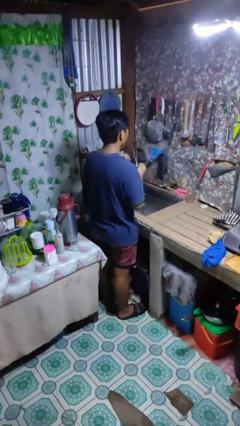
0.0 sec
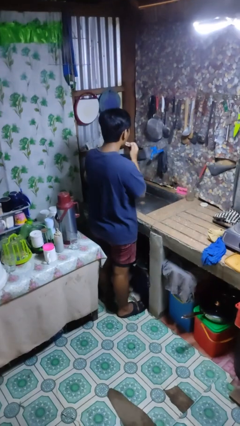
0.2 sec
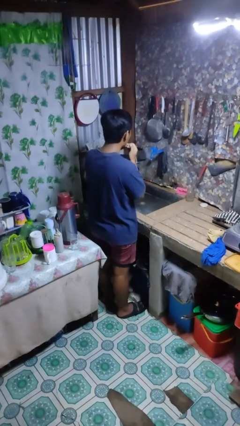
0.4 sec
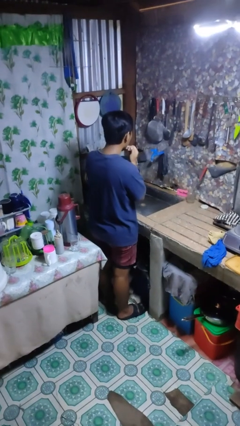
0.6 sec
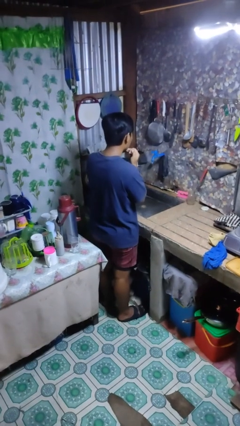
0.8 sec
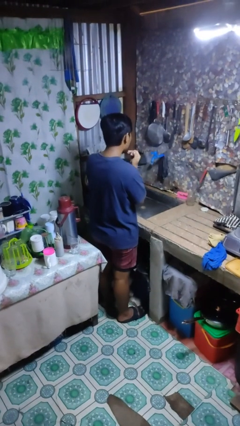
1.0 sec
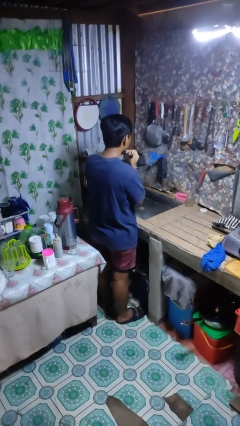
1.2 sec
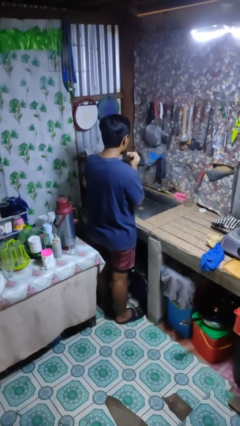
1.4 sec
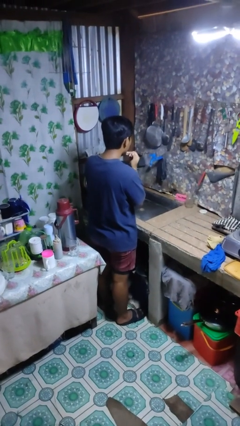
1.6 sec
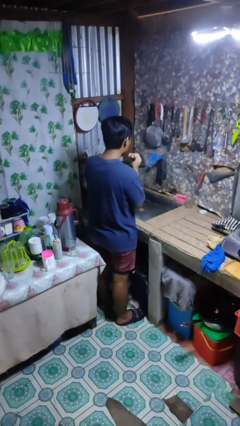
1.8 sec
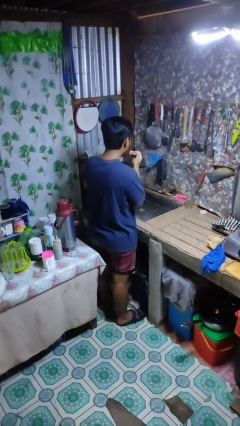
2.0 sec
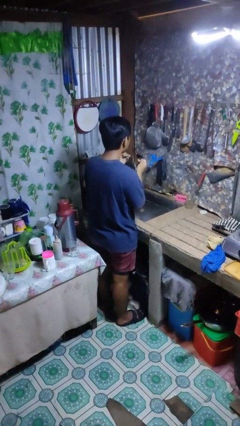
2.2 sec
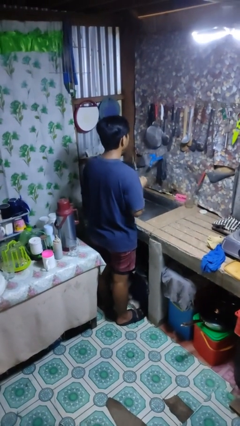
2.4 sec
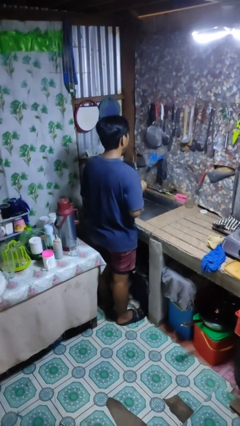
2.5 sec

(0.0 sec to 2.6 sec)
person flosses

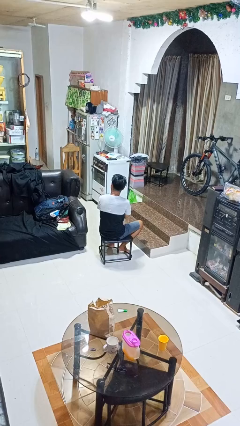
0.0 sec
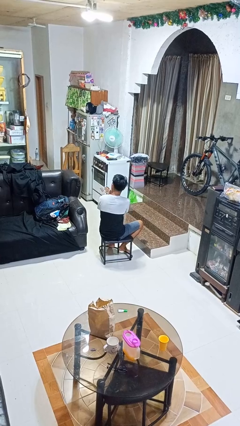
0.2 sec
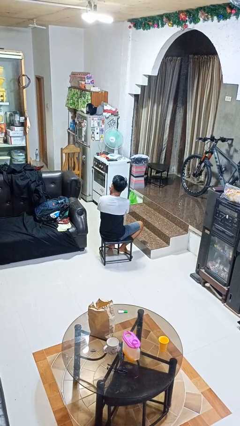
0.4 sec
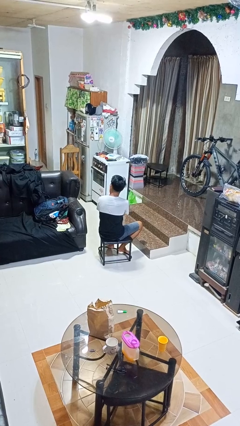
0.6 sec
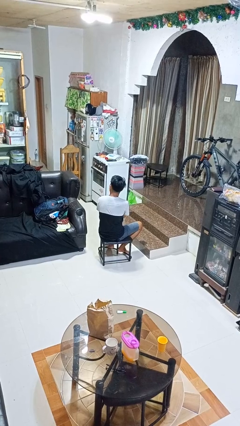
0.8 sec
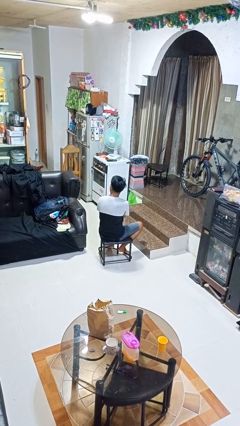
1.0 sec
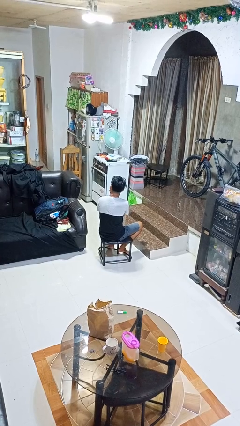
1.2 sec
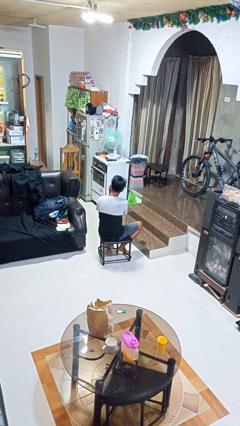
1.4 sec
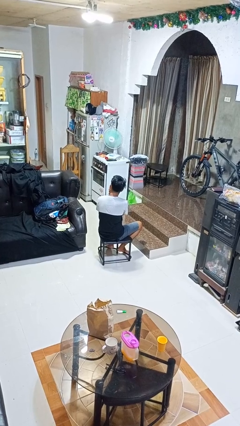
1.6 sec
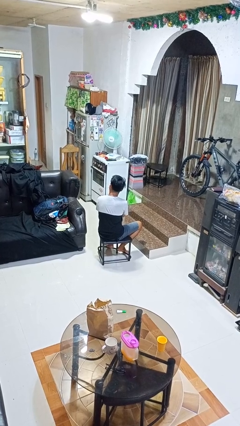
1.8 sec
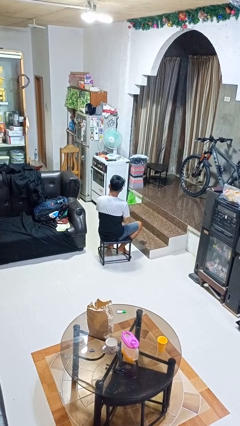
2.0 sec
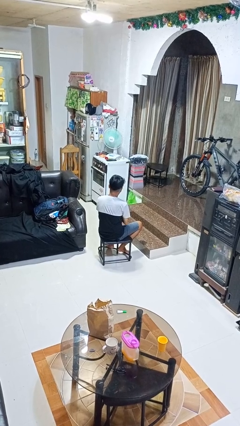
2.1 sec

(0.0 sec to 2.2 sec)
person strokes chin

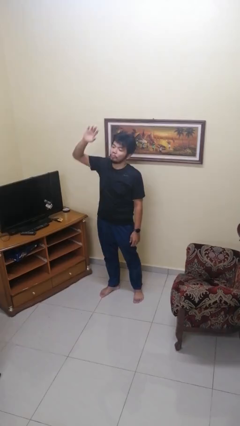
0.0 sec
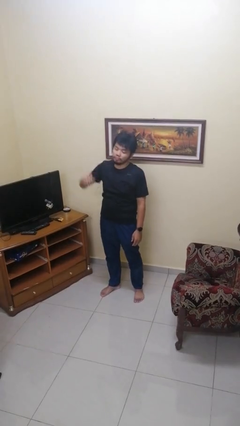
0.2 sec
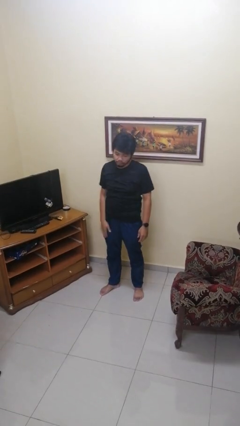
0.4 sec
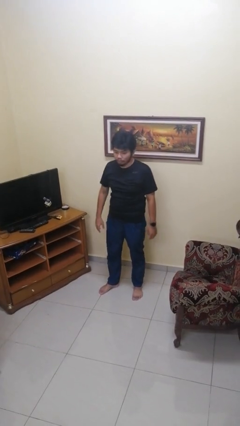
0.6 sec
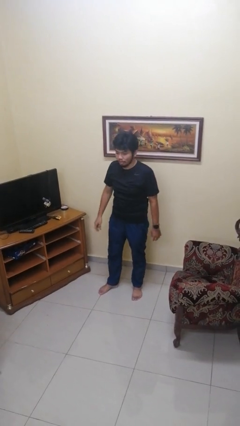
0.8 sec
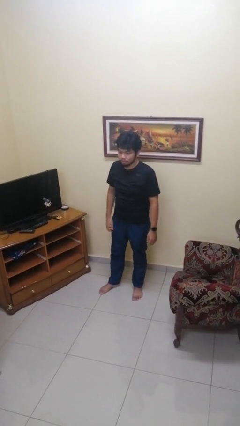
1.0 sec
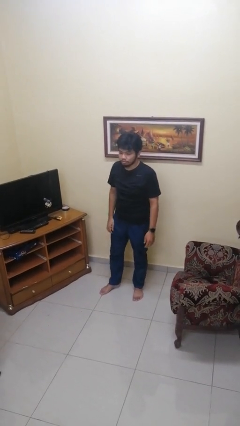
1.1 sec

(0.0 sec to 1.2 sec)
person gestures lower hand

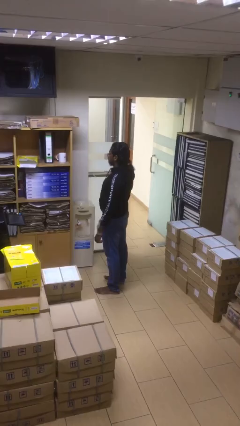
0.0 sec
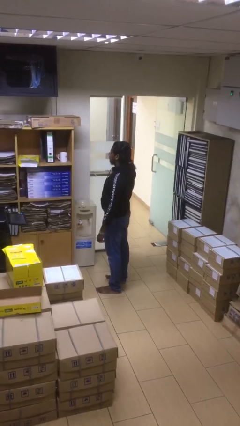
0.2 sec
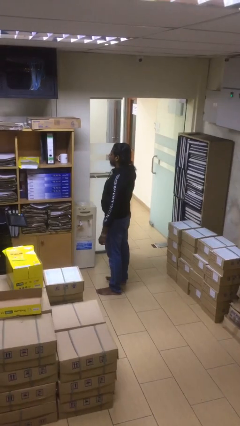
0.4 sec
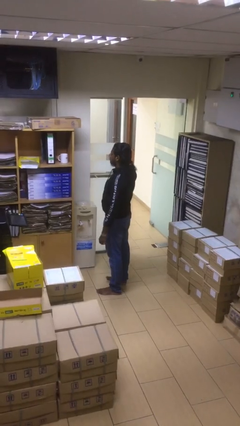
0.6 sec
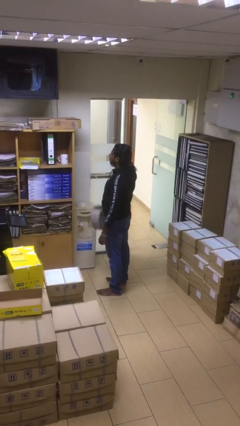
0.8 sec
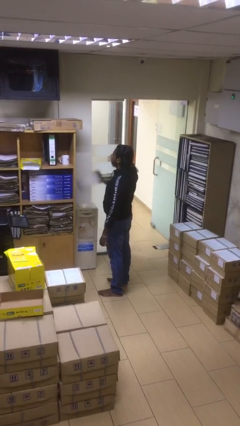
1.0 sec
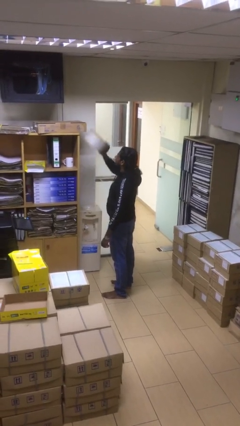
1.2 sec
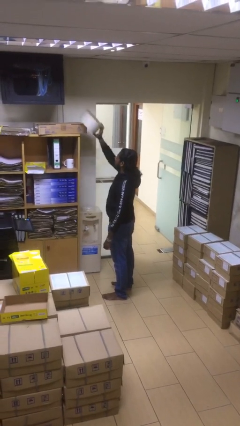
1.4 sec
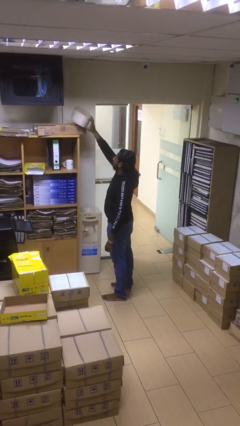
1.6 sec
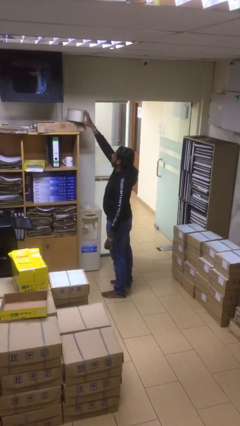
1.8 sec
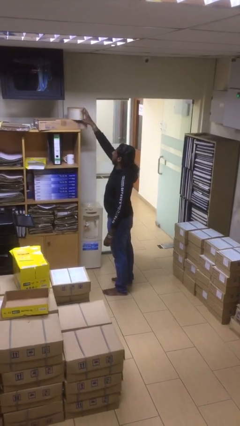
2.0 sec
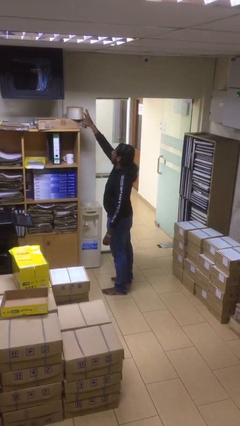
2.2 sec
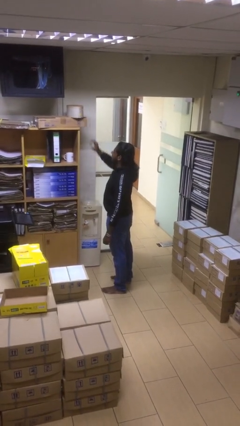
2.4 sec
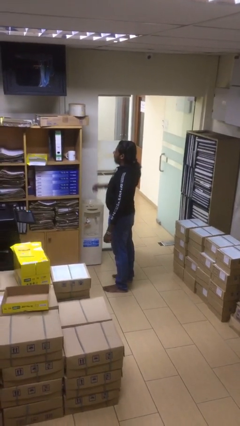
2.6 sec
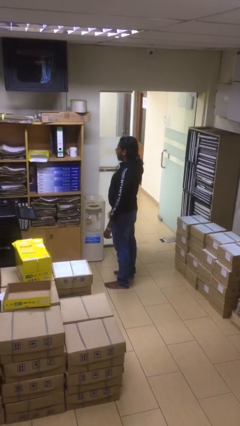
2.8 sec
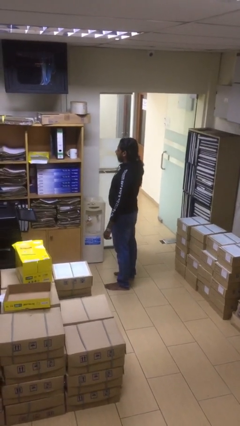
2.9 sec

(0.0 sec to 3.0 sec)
person puts down object on shelf

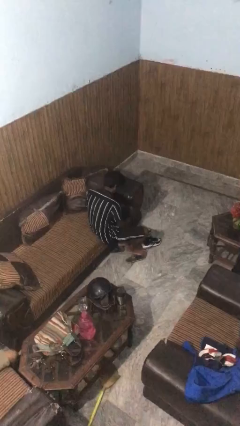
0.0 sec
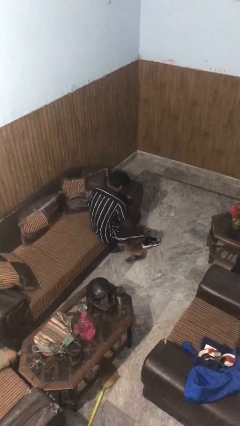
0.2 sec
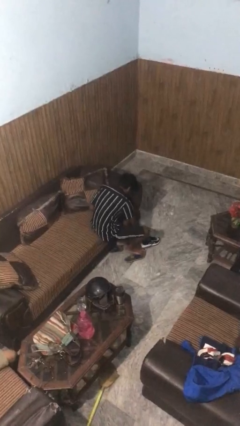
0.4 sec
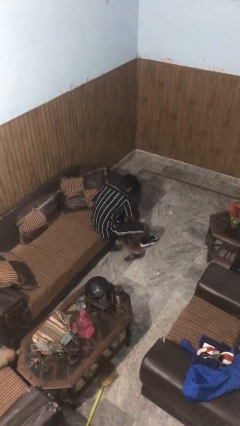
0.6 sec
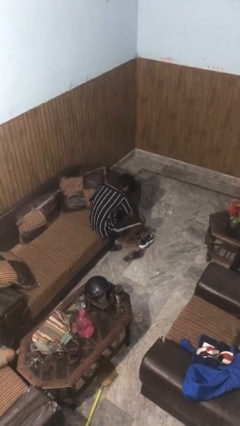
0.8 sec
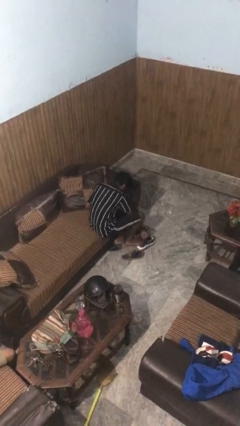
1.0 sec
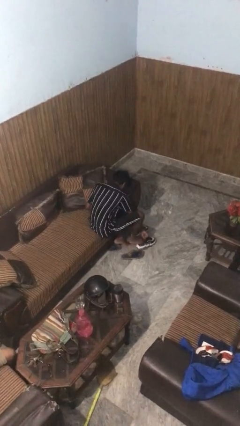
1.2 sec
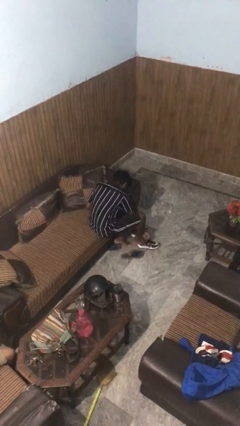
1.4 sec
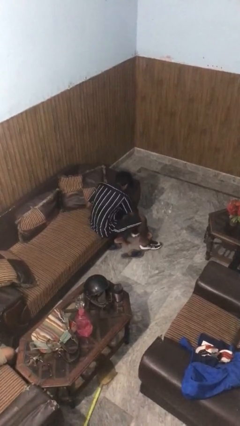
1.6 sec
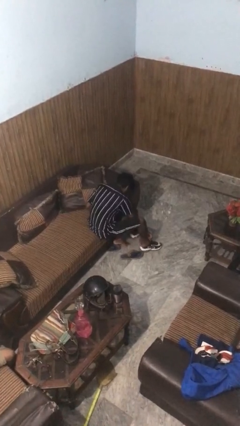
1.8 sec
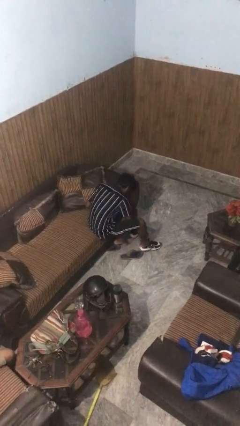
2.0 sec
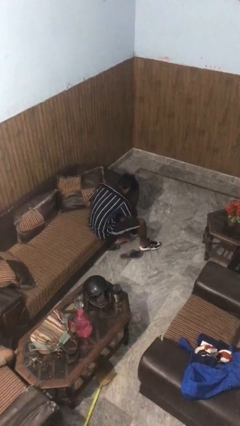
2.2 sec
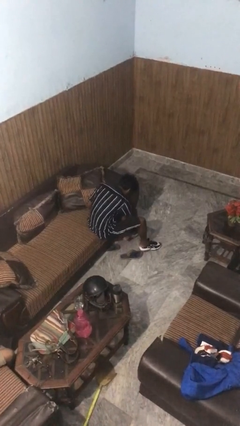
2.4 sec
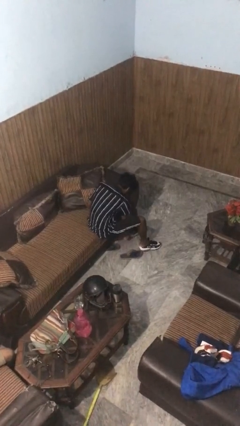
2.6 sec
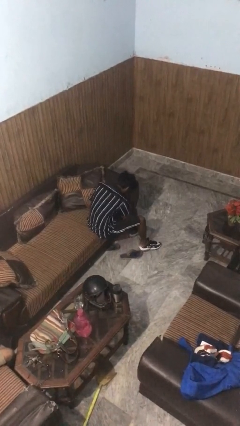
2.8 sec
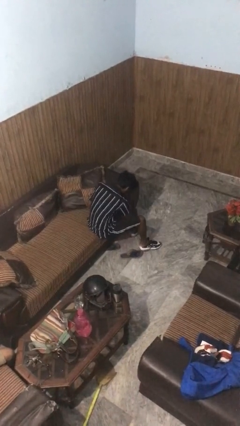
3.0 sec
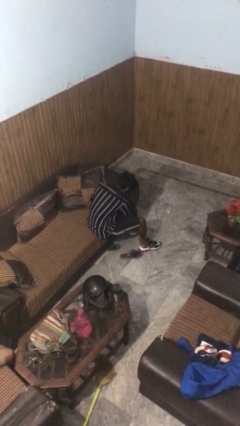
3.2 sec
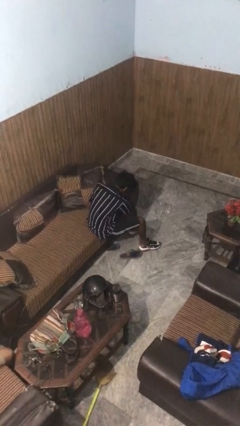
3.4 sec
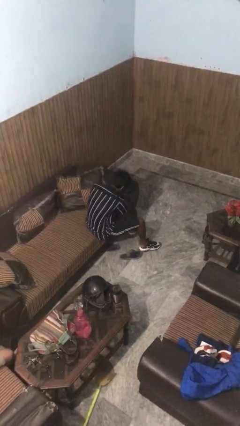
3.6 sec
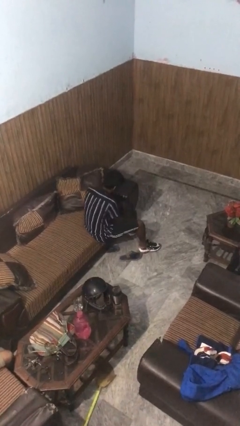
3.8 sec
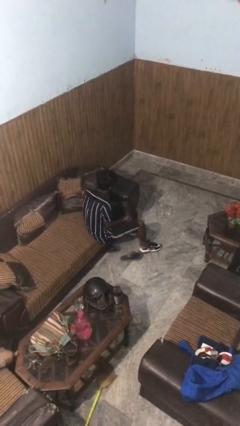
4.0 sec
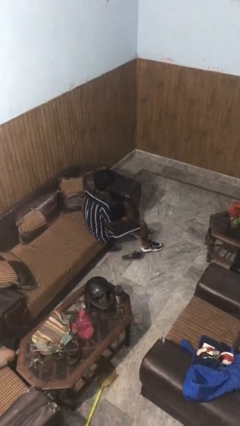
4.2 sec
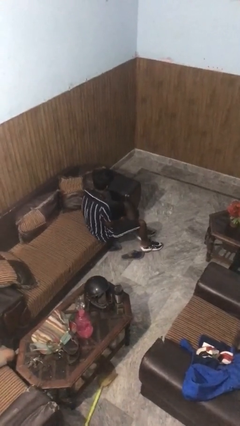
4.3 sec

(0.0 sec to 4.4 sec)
person puts on shoes

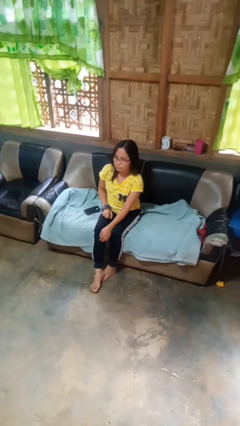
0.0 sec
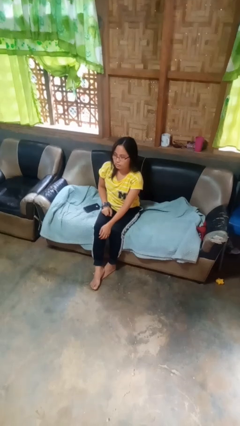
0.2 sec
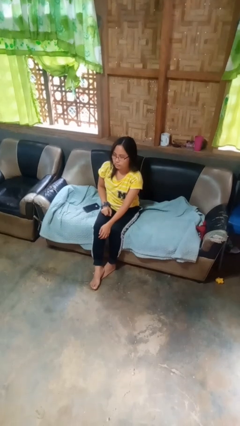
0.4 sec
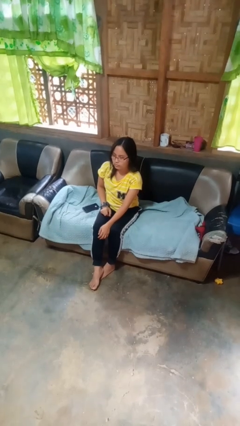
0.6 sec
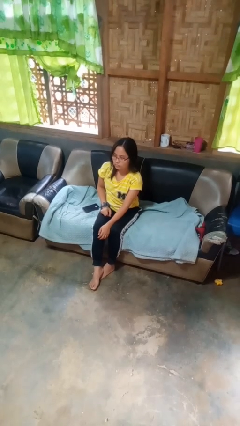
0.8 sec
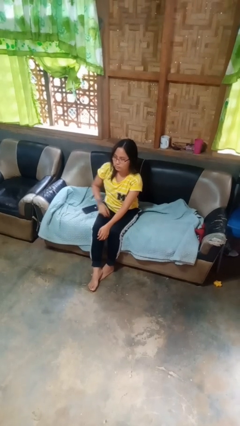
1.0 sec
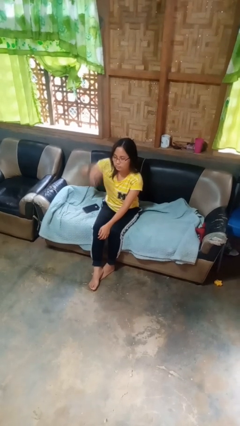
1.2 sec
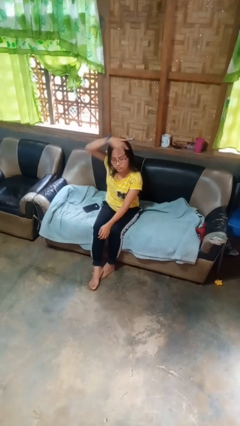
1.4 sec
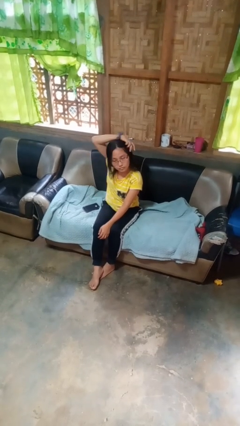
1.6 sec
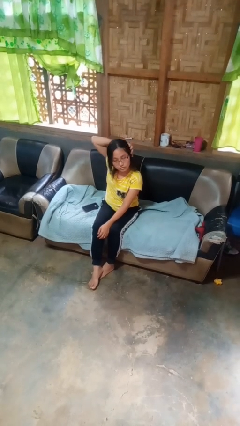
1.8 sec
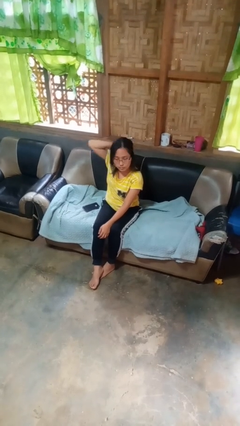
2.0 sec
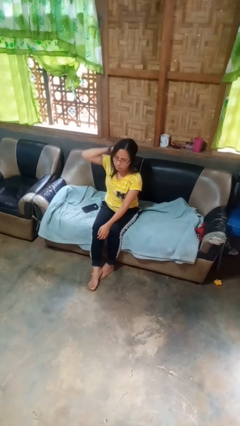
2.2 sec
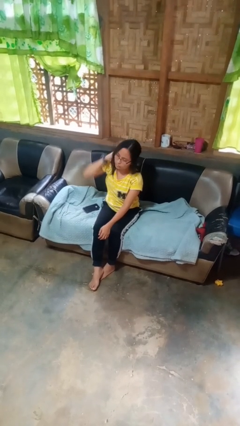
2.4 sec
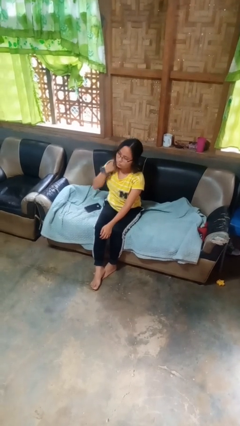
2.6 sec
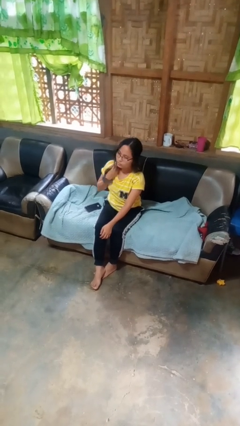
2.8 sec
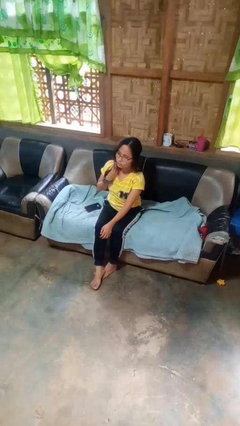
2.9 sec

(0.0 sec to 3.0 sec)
person strokes hair

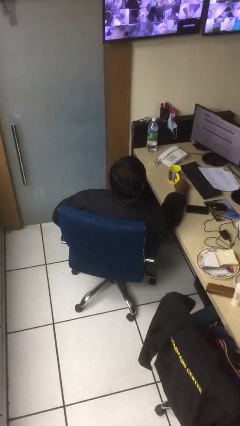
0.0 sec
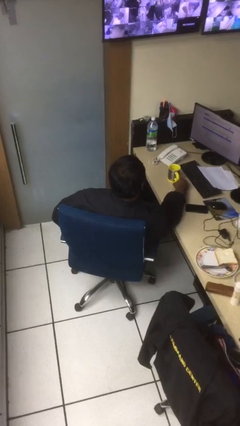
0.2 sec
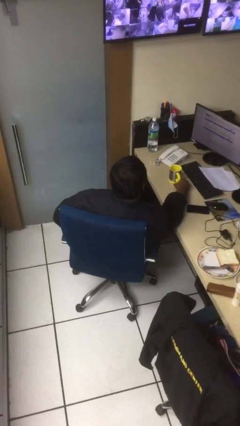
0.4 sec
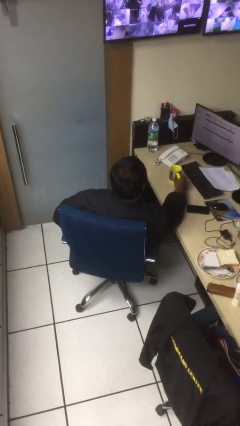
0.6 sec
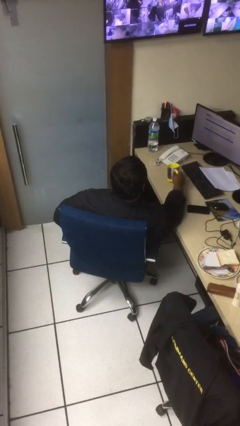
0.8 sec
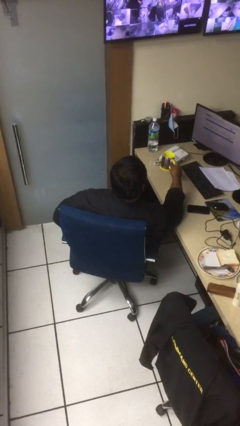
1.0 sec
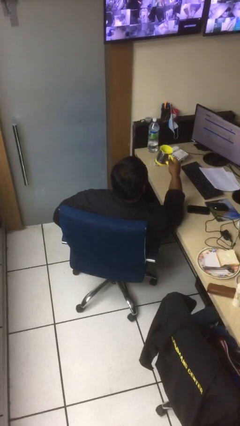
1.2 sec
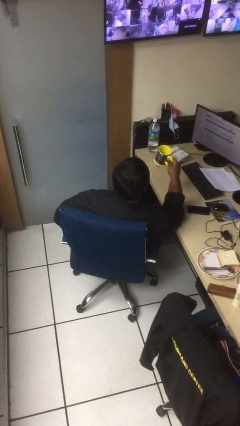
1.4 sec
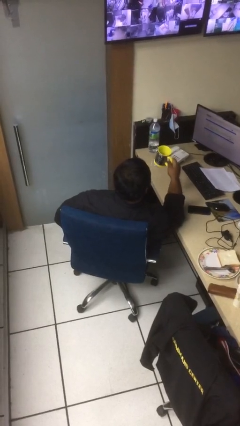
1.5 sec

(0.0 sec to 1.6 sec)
person picks up object from table
